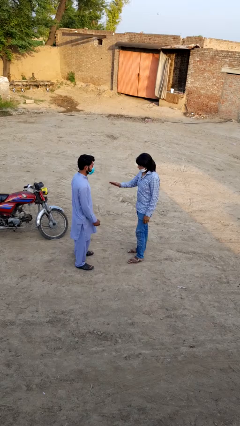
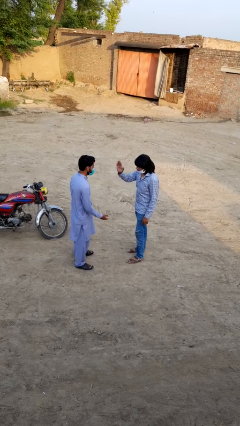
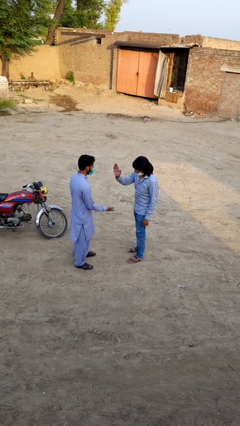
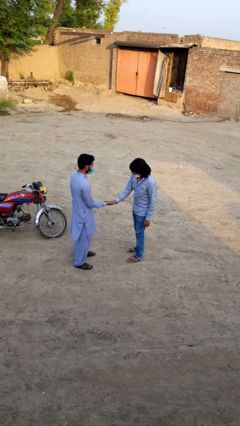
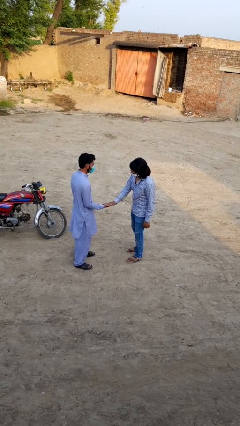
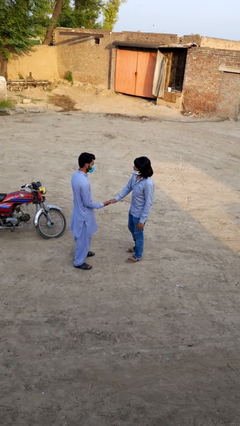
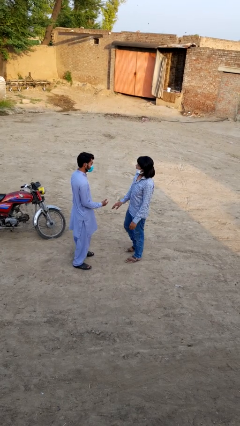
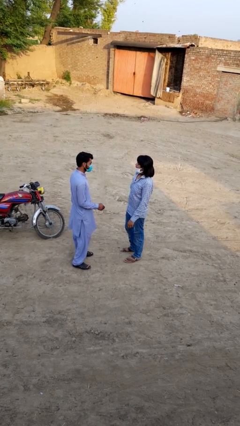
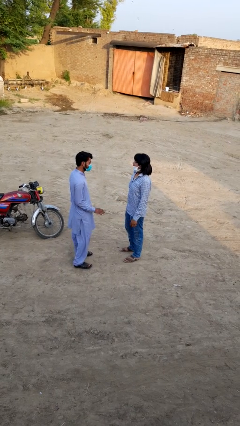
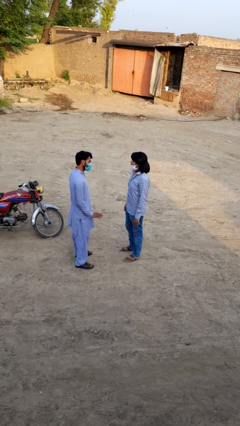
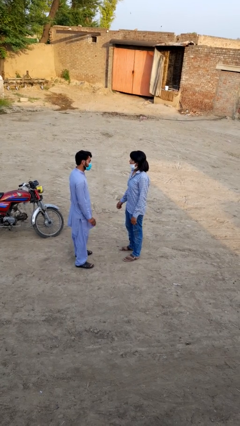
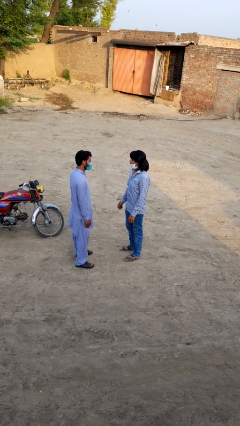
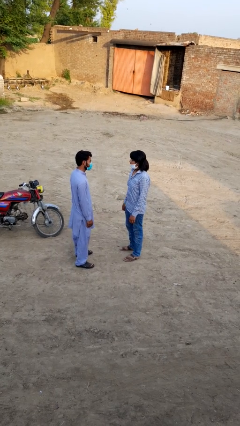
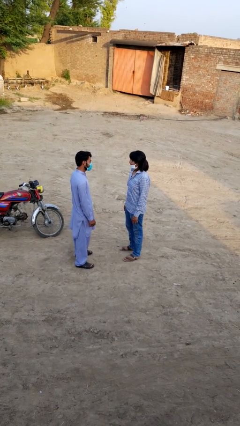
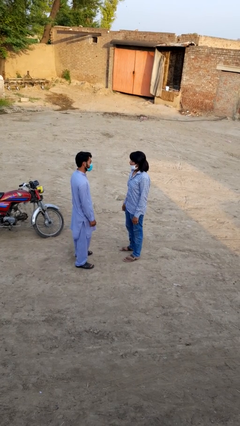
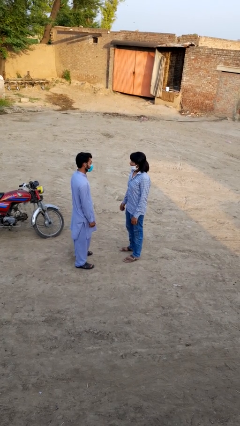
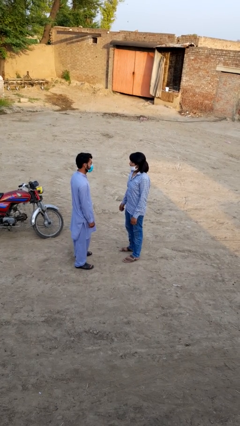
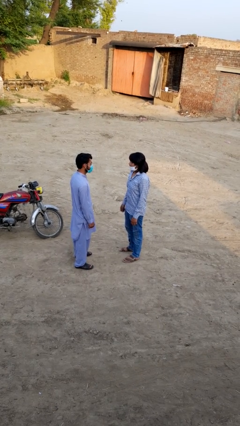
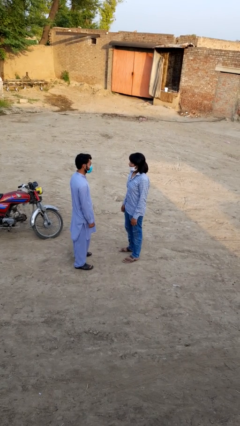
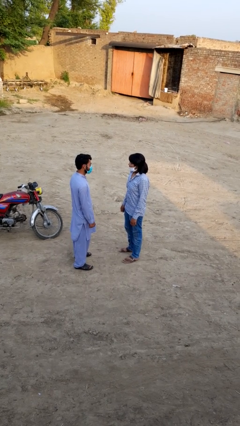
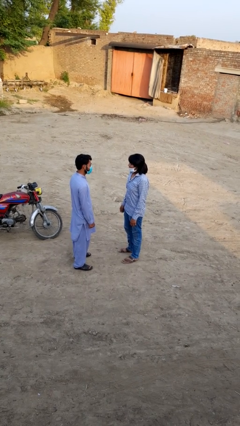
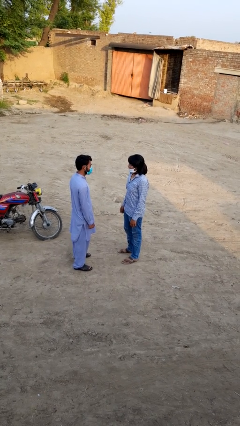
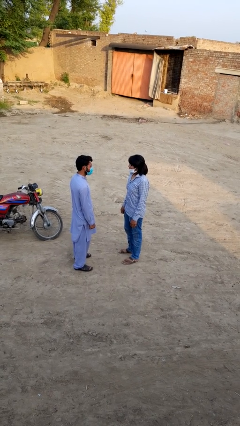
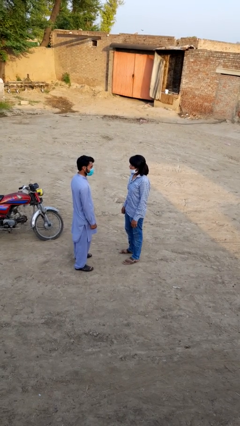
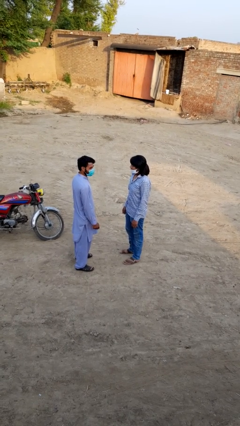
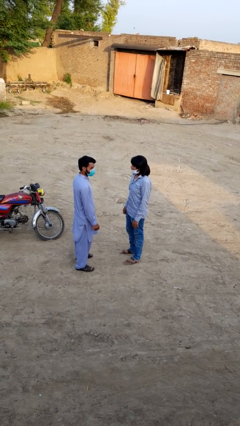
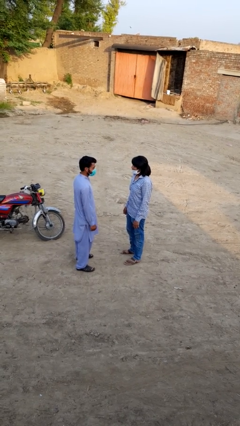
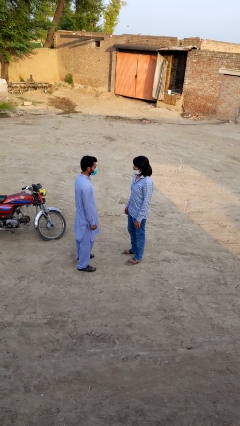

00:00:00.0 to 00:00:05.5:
person highfives hand

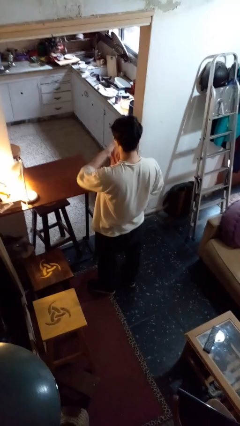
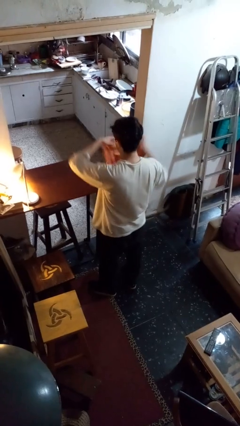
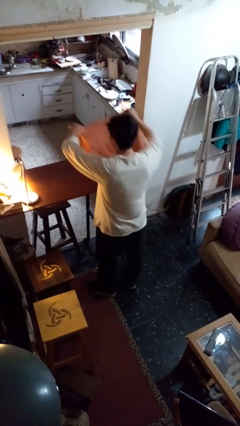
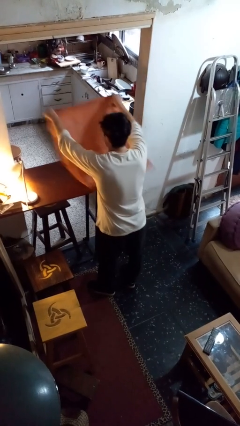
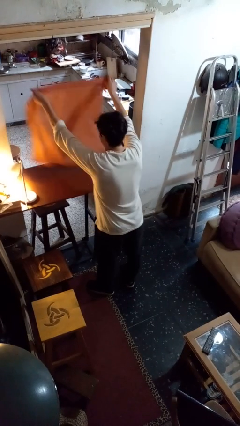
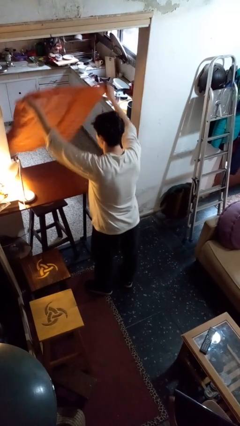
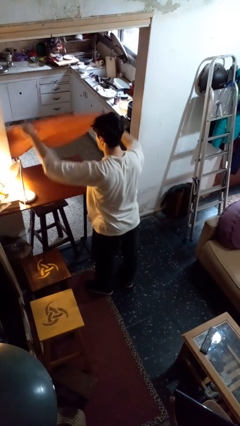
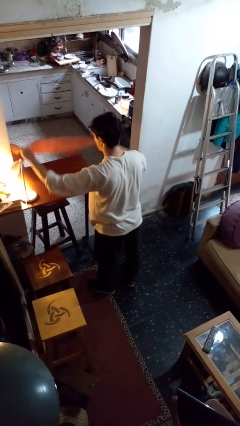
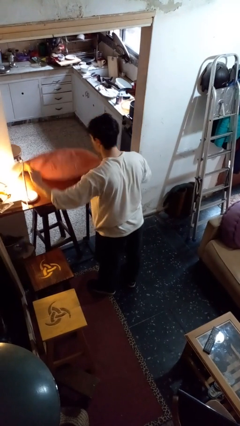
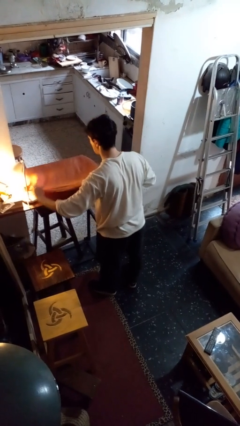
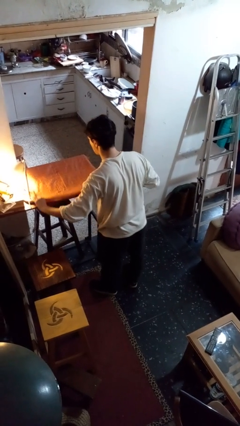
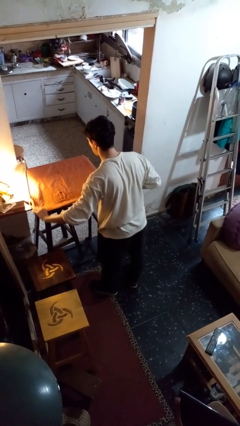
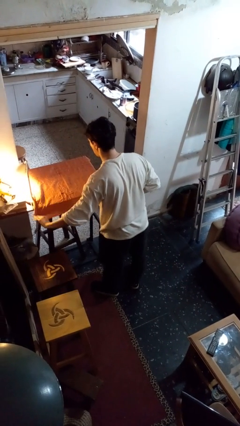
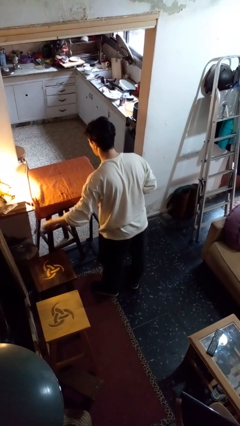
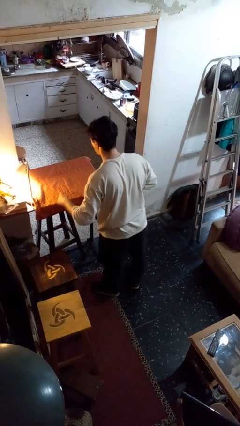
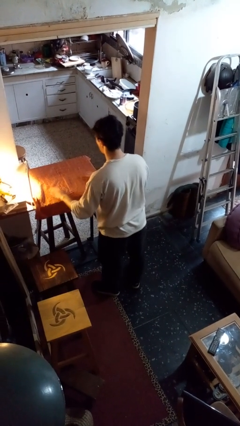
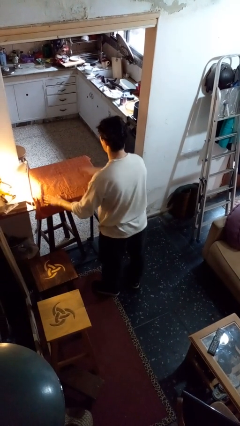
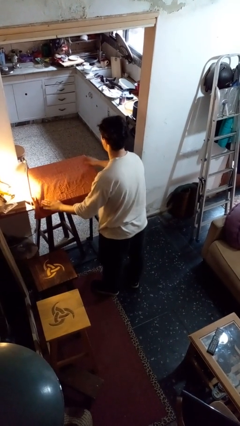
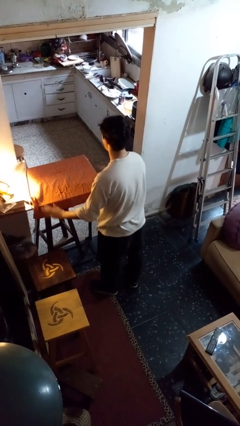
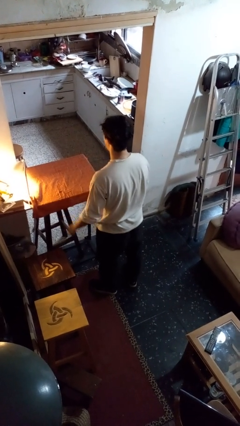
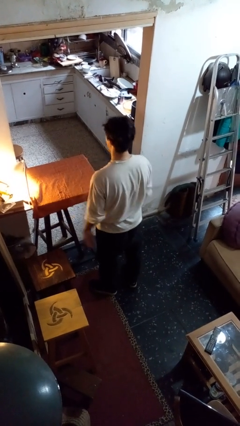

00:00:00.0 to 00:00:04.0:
person spreads tablecloth

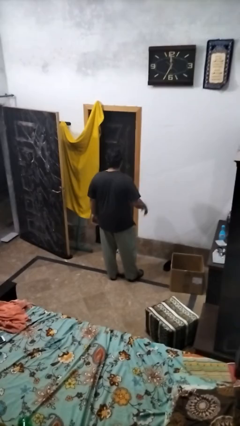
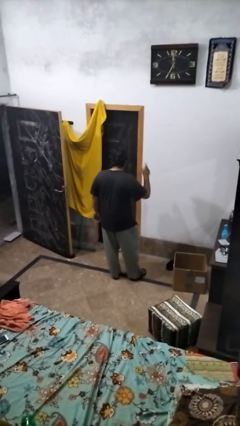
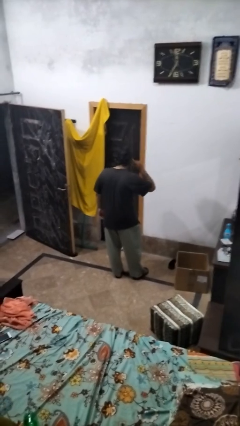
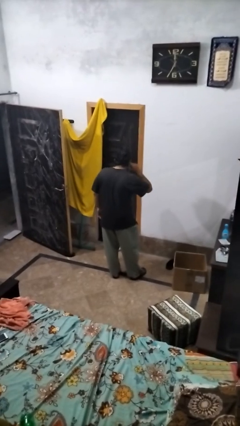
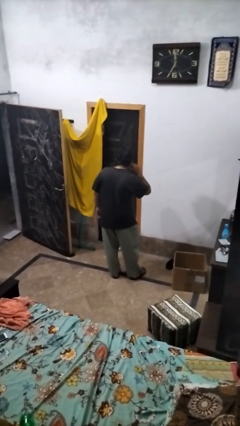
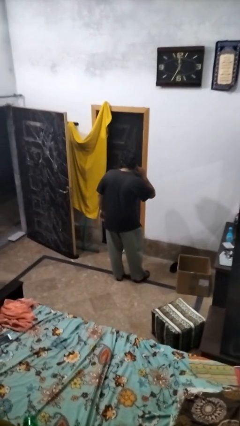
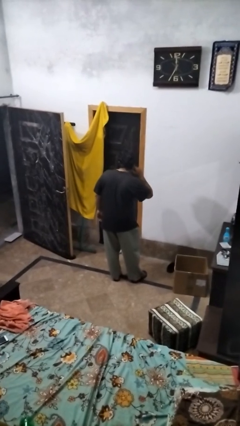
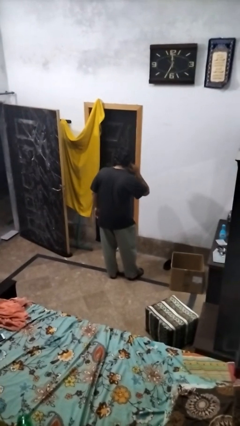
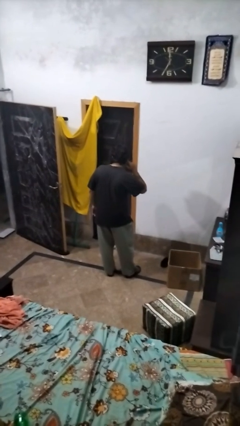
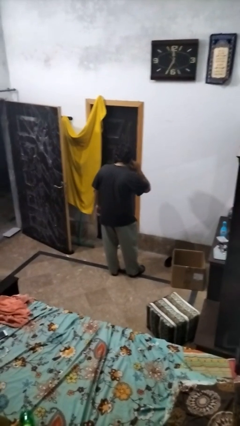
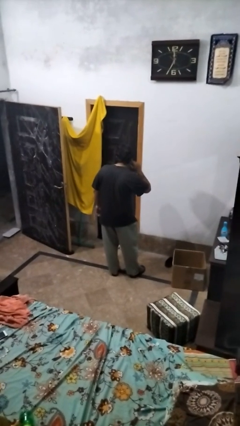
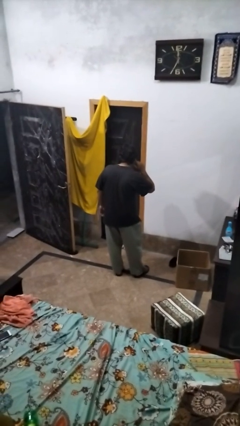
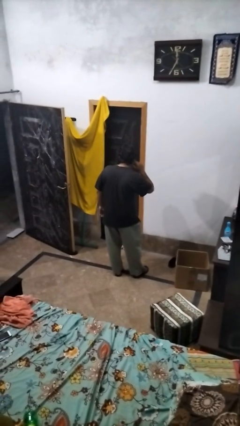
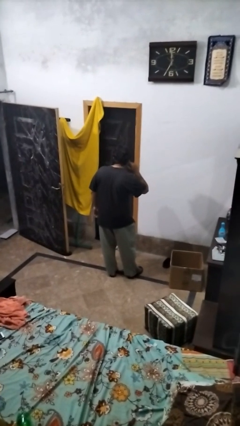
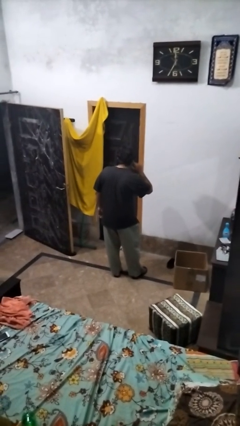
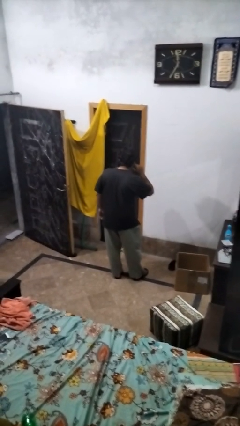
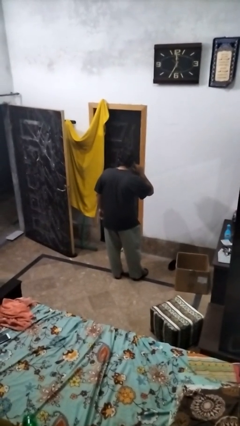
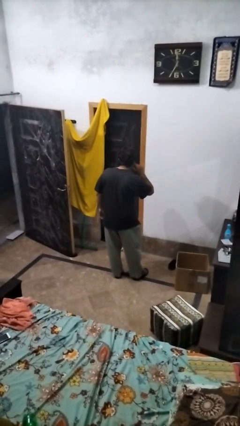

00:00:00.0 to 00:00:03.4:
person gestures listen closely

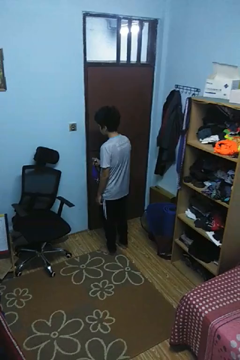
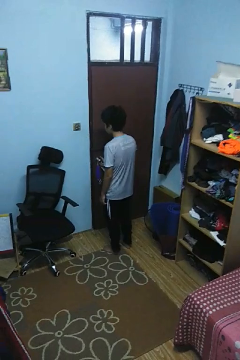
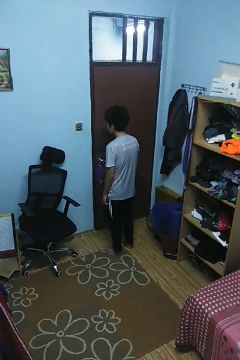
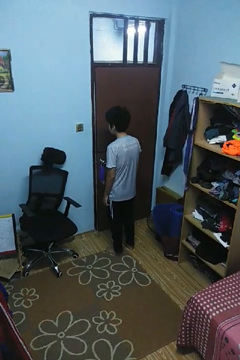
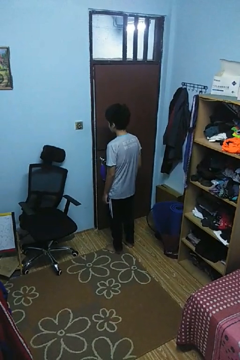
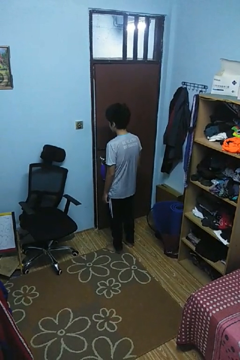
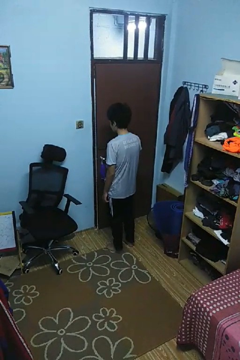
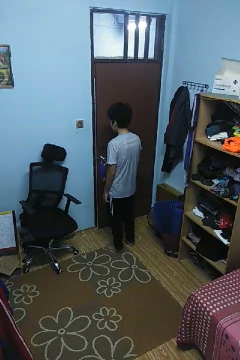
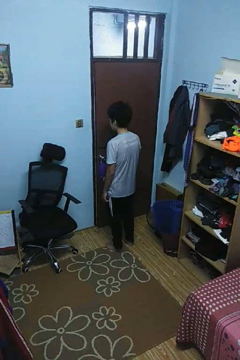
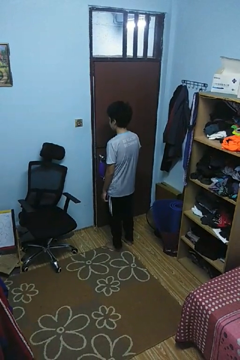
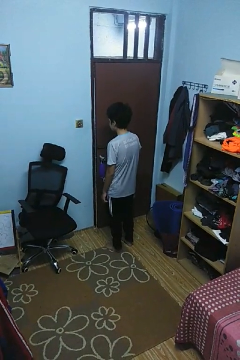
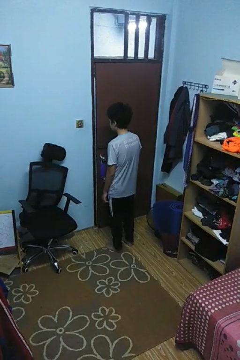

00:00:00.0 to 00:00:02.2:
person locks door with keys

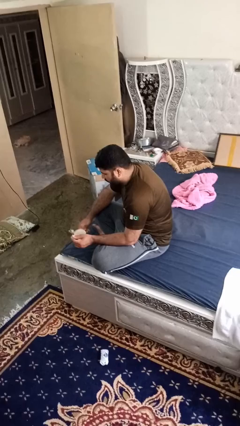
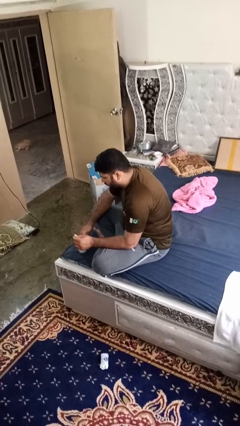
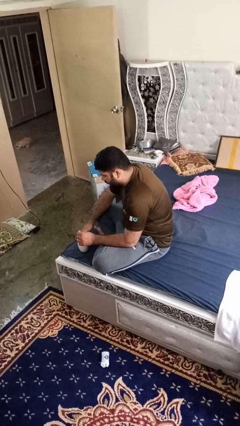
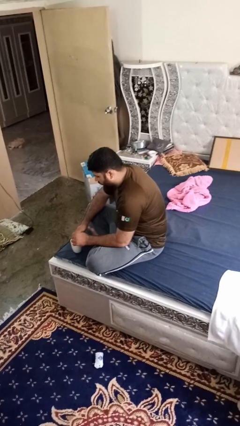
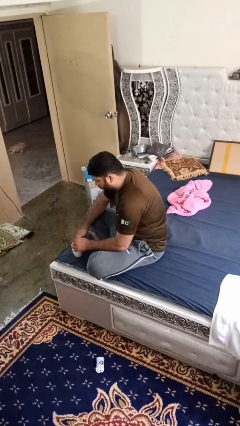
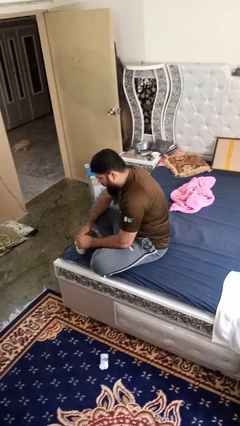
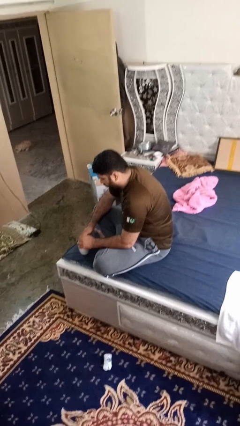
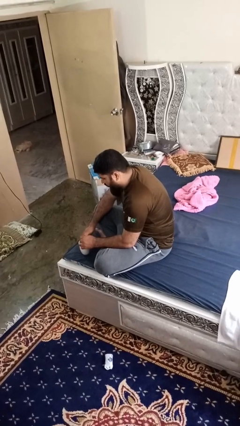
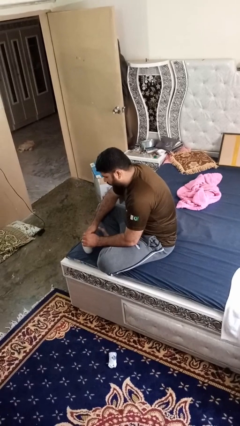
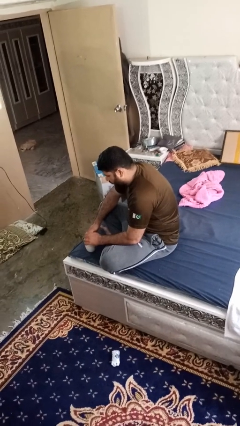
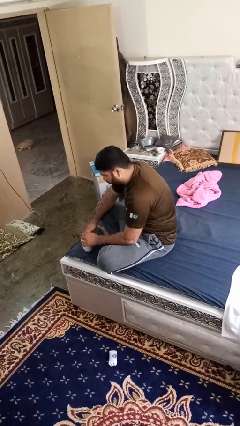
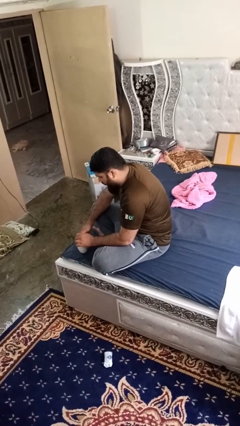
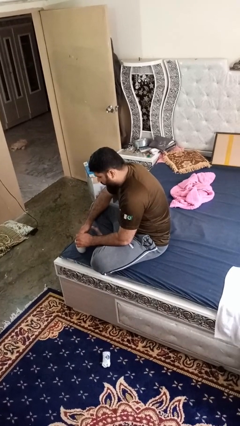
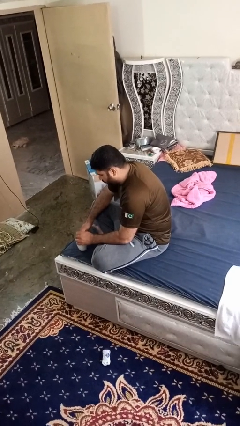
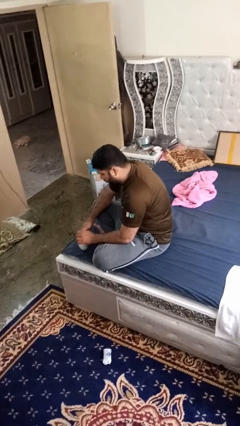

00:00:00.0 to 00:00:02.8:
person stirs mug
